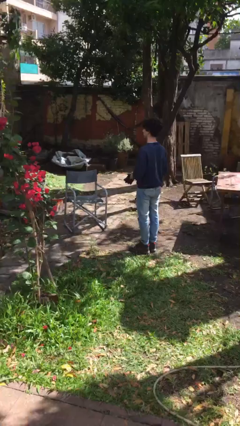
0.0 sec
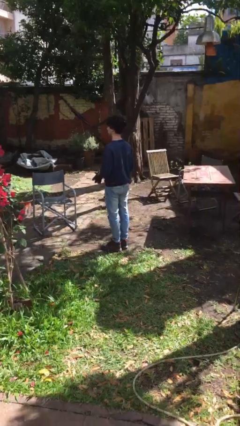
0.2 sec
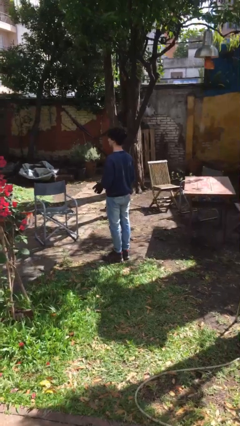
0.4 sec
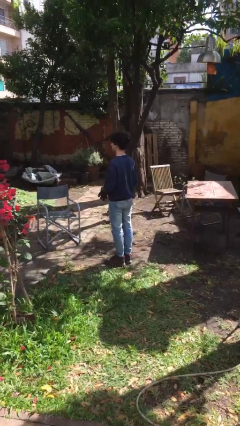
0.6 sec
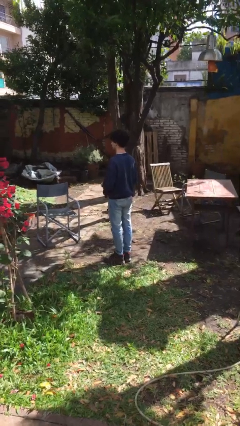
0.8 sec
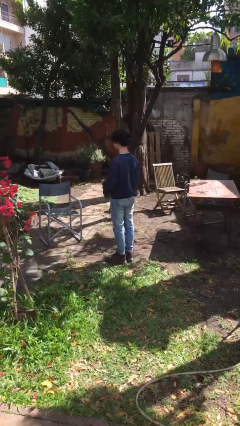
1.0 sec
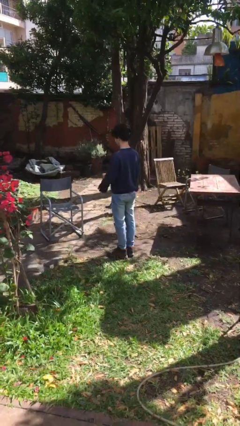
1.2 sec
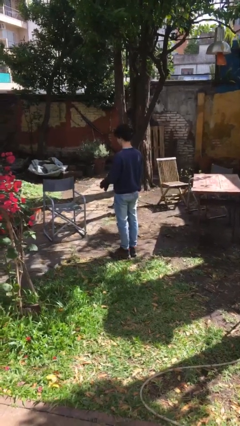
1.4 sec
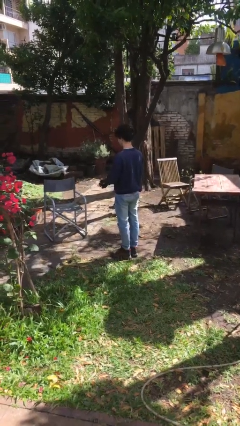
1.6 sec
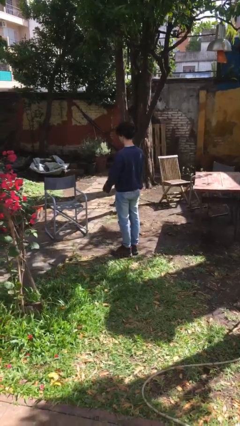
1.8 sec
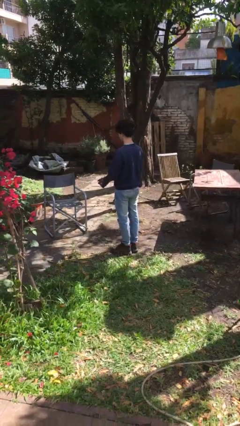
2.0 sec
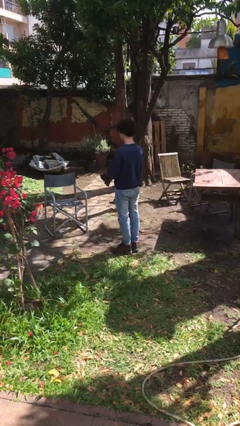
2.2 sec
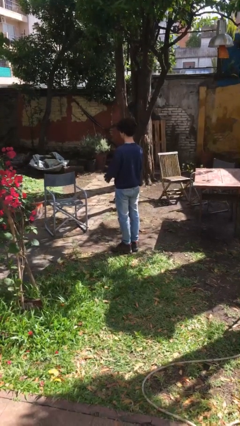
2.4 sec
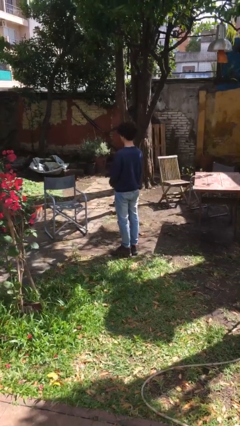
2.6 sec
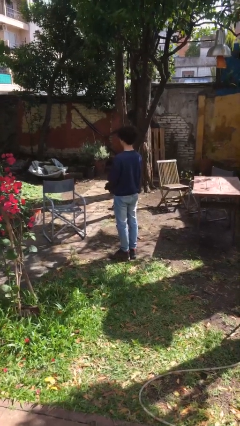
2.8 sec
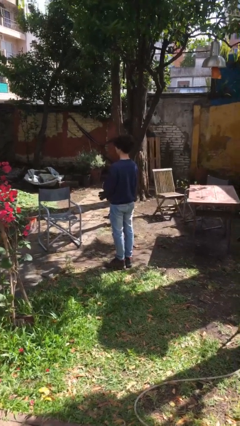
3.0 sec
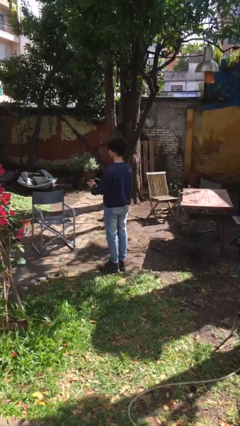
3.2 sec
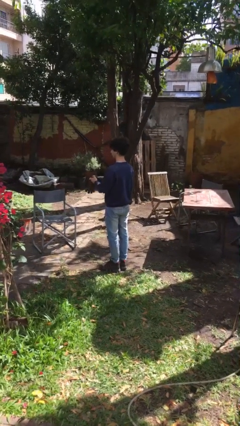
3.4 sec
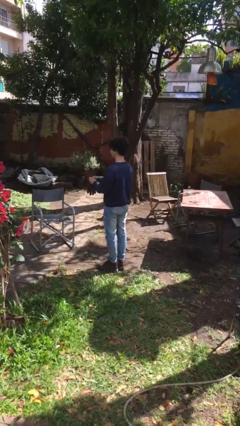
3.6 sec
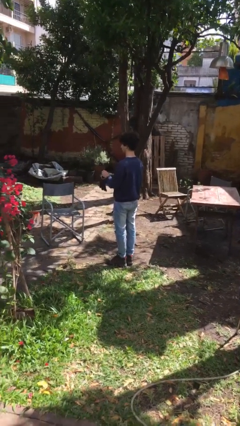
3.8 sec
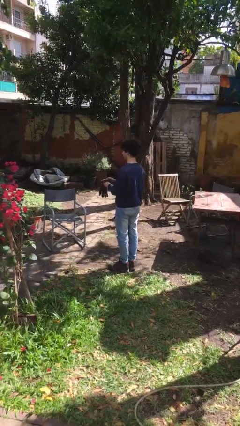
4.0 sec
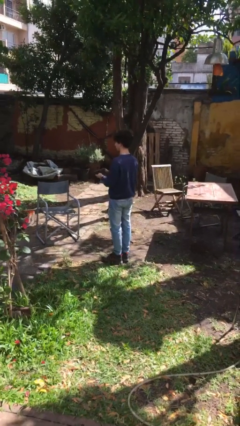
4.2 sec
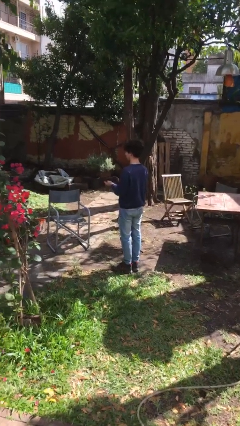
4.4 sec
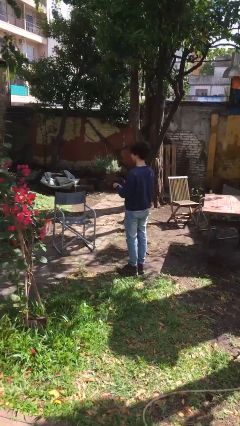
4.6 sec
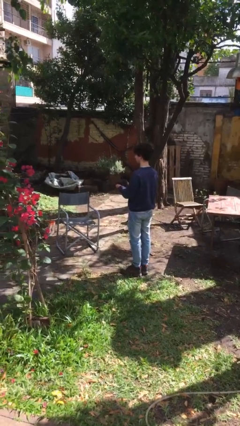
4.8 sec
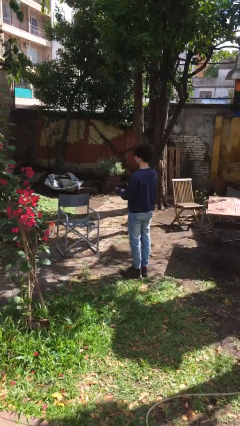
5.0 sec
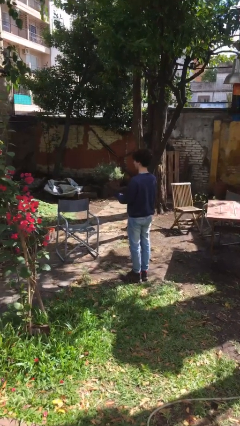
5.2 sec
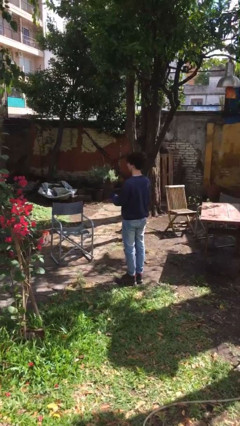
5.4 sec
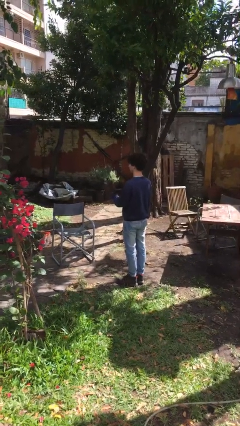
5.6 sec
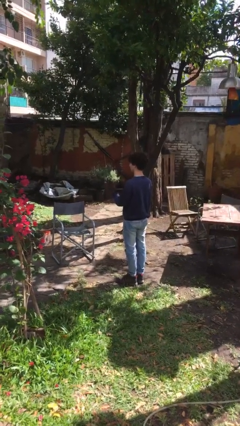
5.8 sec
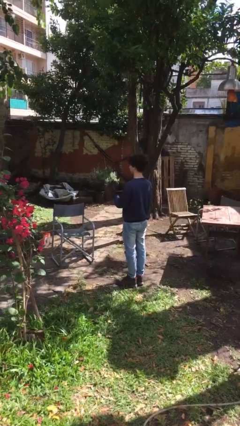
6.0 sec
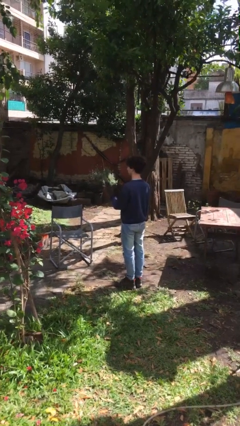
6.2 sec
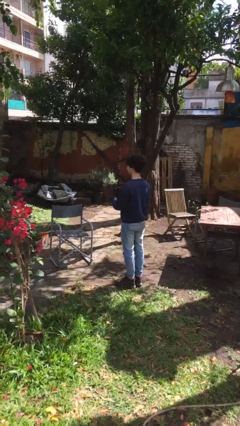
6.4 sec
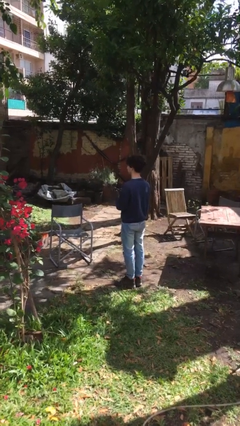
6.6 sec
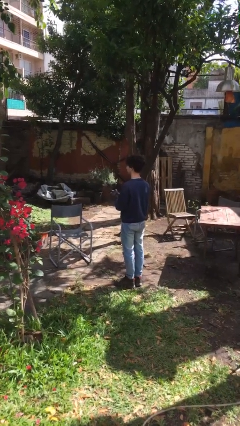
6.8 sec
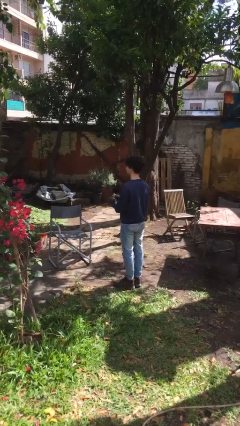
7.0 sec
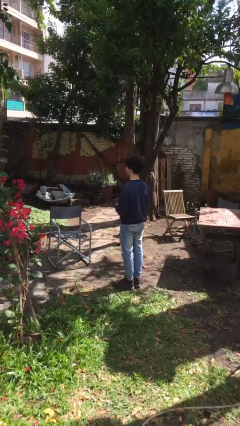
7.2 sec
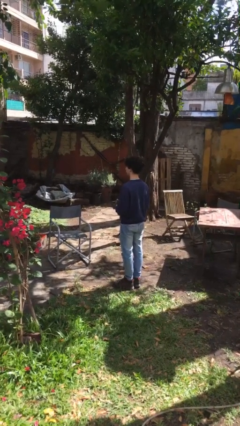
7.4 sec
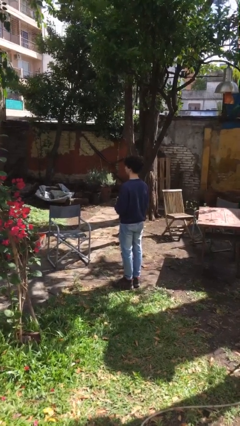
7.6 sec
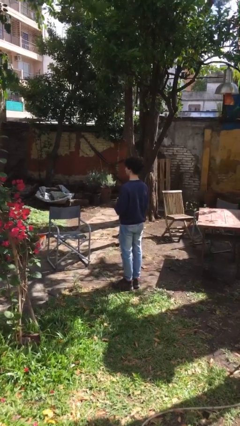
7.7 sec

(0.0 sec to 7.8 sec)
person puts on gloves

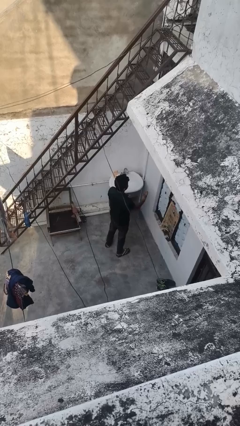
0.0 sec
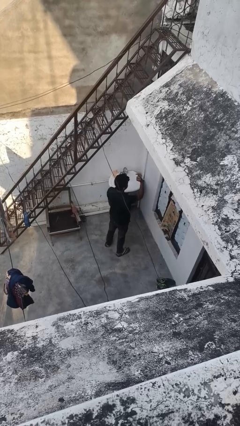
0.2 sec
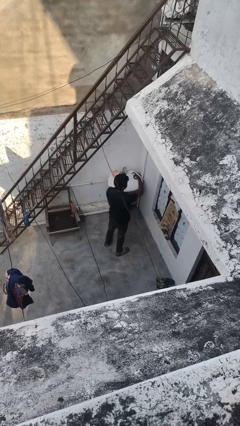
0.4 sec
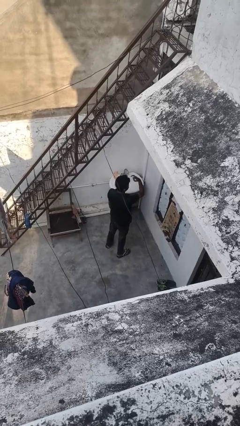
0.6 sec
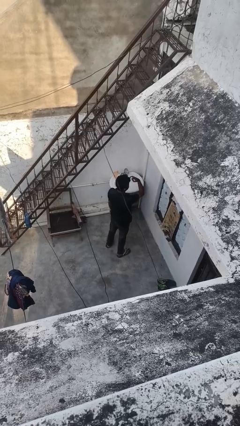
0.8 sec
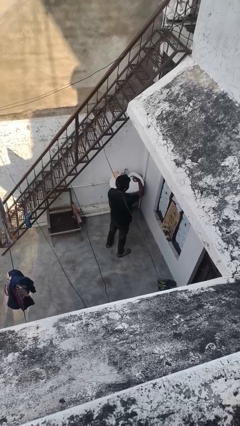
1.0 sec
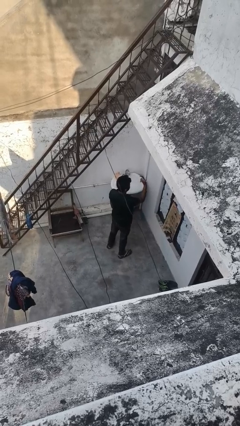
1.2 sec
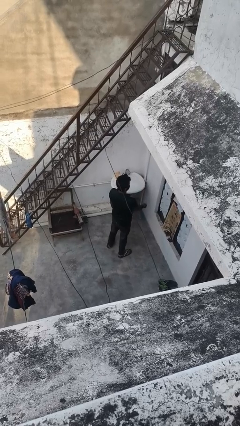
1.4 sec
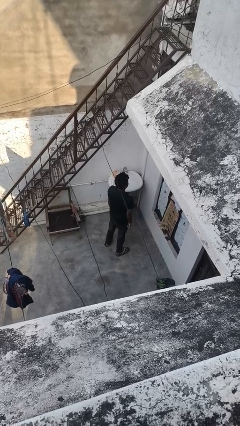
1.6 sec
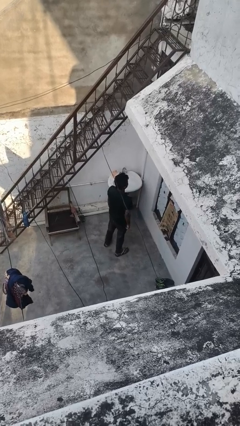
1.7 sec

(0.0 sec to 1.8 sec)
person gestures watch closely

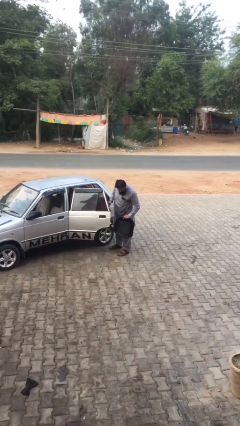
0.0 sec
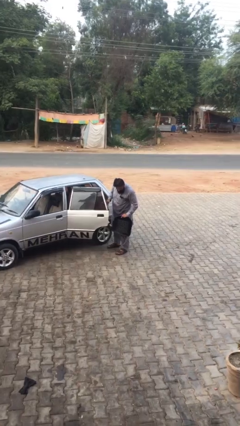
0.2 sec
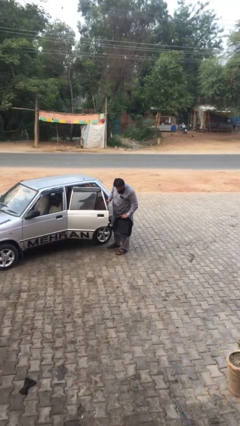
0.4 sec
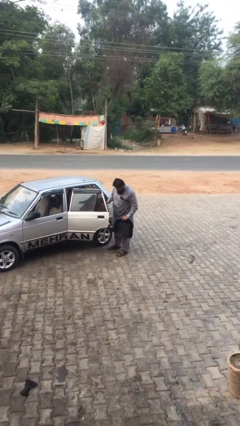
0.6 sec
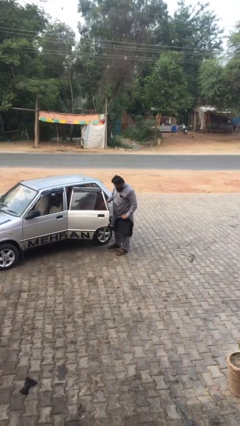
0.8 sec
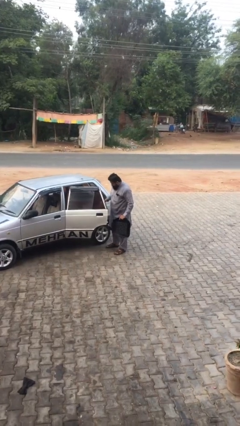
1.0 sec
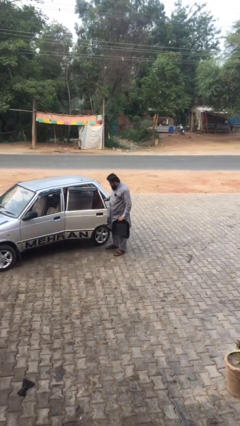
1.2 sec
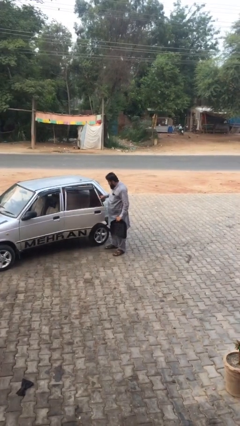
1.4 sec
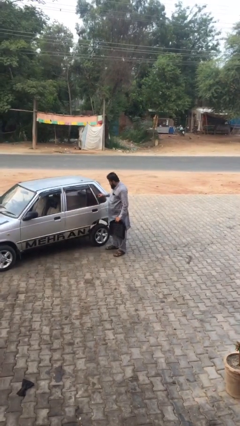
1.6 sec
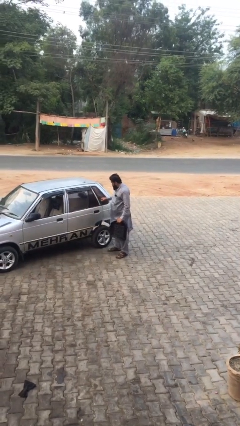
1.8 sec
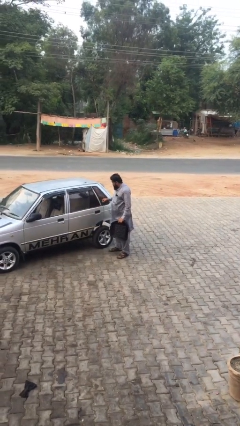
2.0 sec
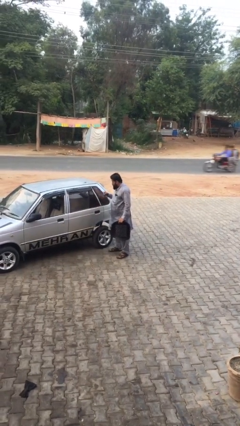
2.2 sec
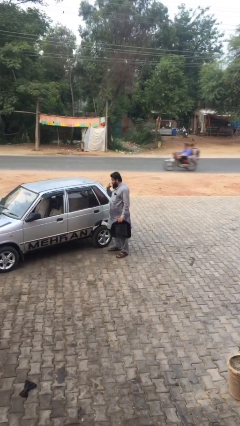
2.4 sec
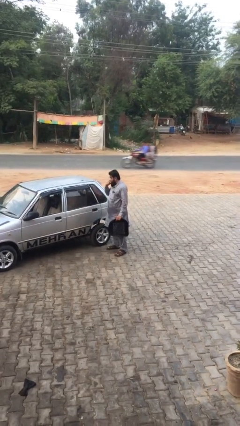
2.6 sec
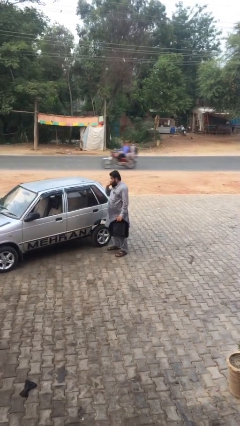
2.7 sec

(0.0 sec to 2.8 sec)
person closes car door

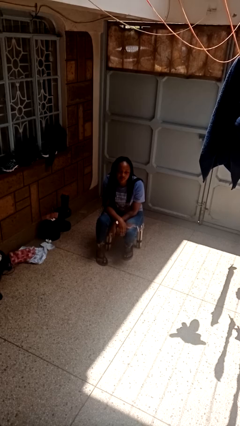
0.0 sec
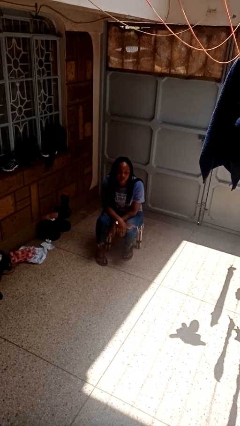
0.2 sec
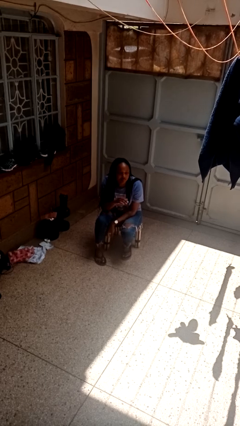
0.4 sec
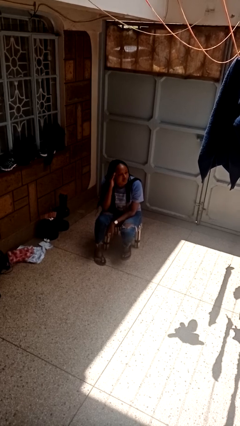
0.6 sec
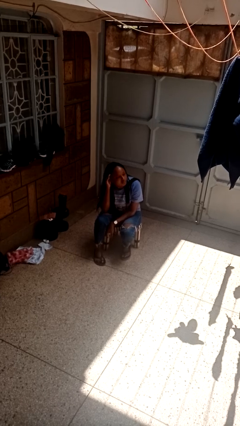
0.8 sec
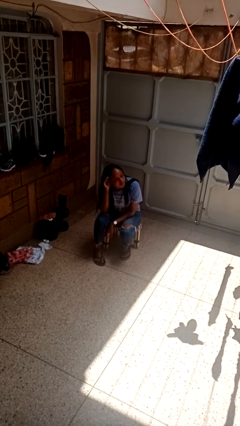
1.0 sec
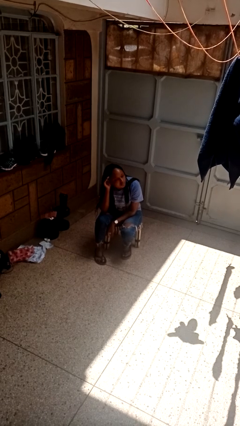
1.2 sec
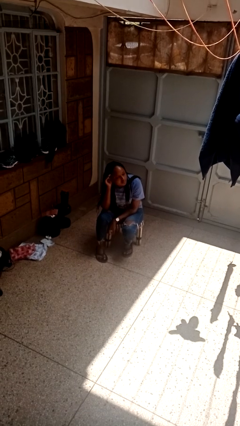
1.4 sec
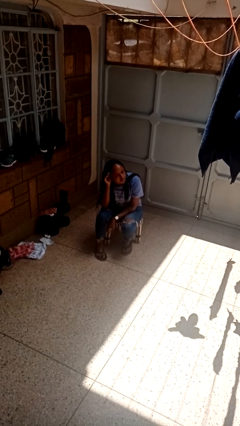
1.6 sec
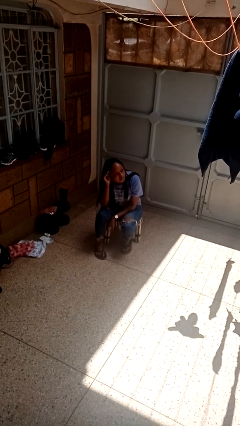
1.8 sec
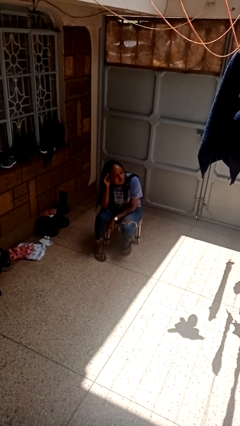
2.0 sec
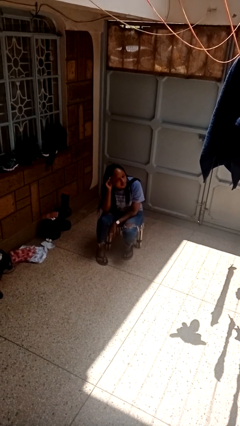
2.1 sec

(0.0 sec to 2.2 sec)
person gestures listen closely

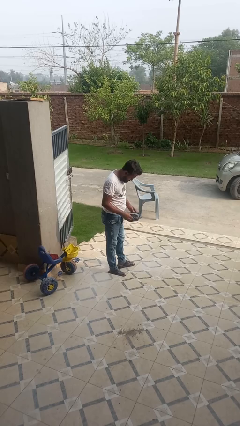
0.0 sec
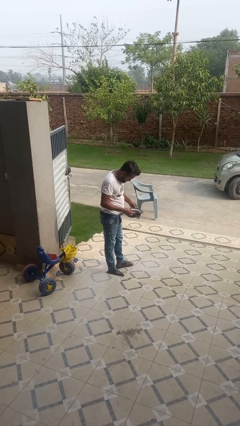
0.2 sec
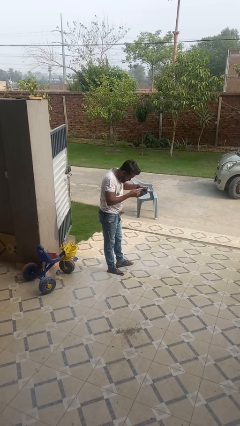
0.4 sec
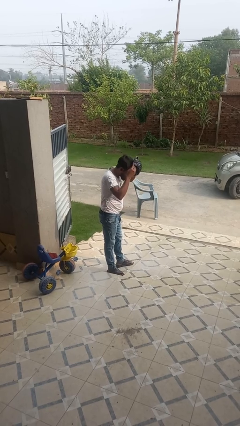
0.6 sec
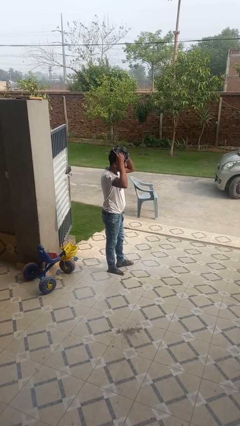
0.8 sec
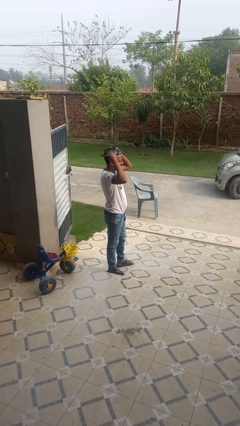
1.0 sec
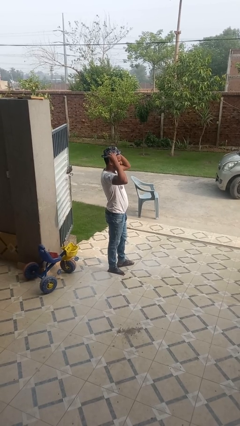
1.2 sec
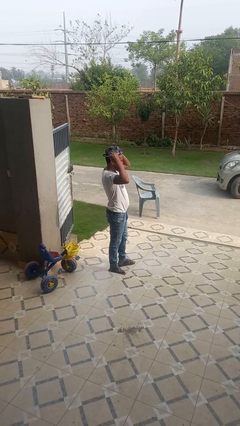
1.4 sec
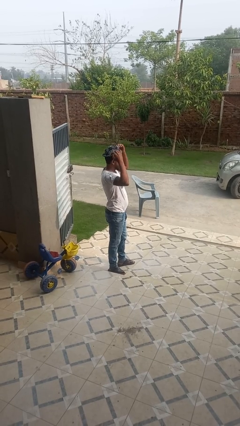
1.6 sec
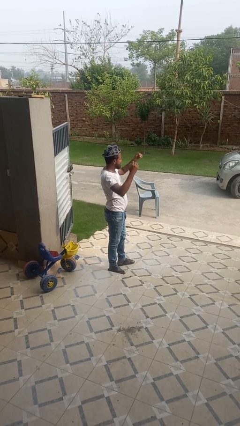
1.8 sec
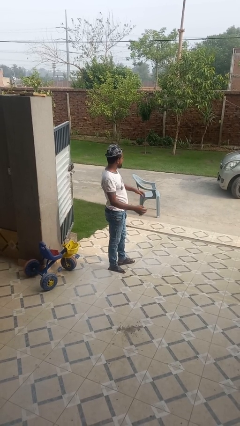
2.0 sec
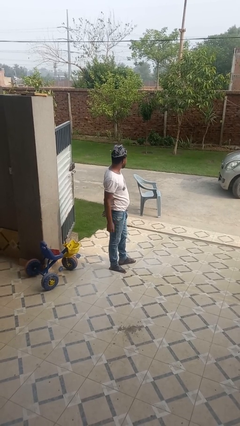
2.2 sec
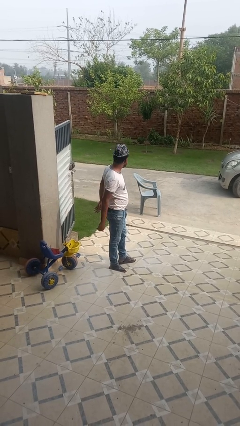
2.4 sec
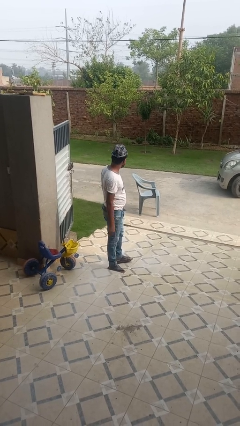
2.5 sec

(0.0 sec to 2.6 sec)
person puts on hat

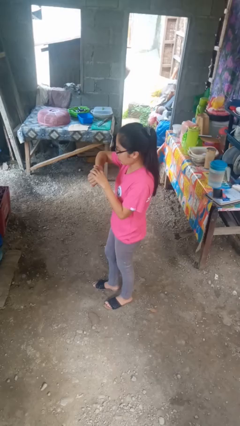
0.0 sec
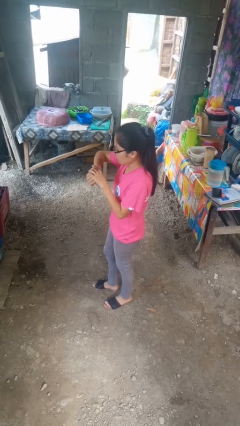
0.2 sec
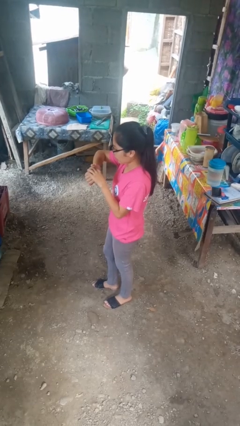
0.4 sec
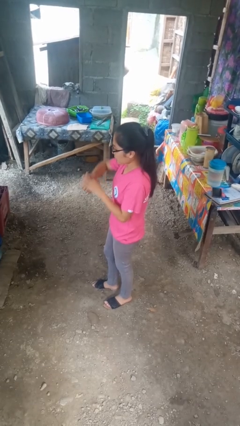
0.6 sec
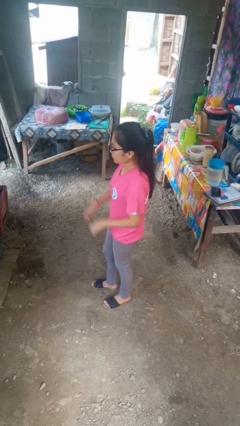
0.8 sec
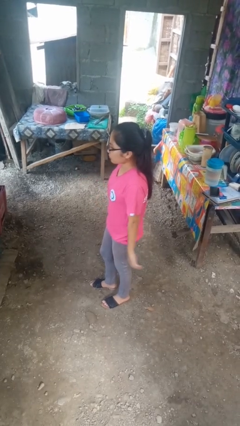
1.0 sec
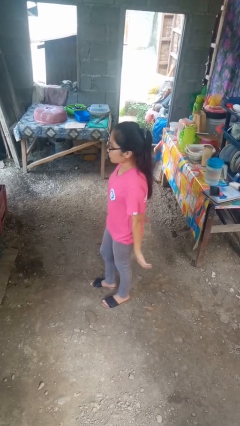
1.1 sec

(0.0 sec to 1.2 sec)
person looks at wristwatch
